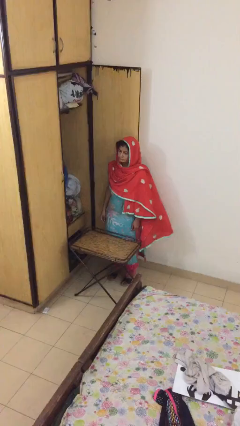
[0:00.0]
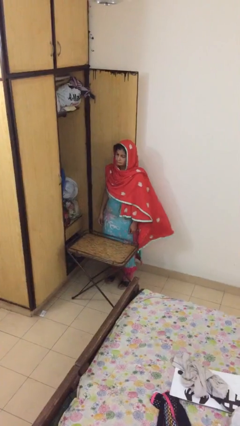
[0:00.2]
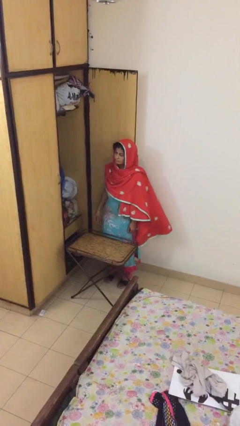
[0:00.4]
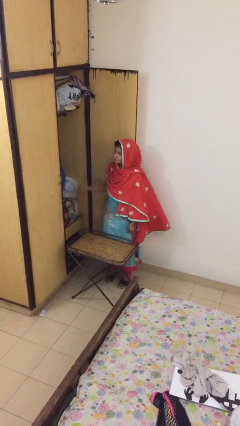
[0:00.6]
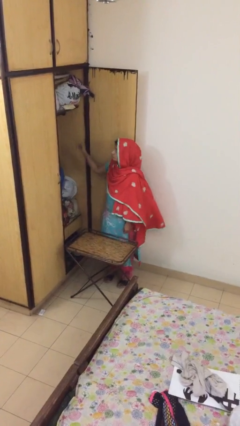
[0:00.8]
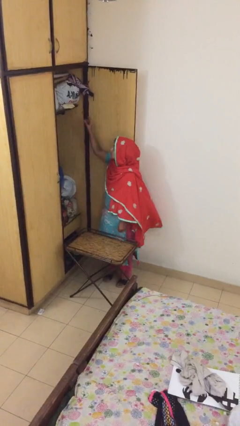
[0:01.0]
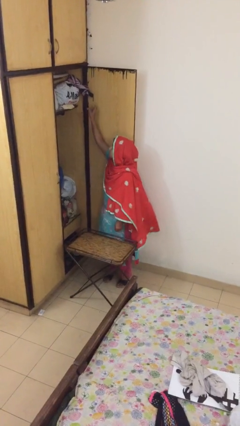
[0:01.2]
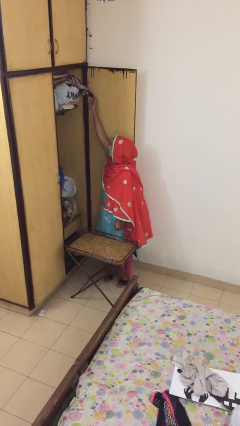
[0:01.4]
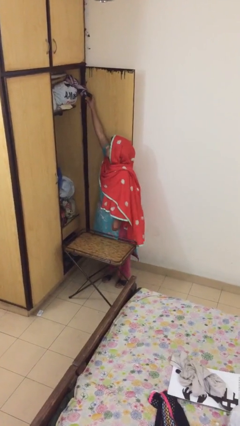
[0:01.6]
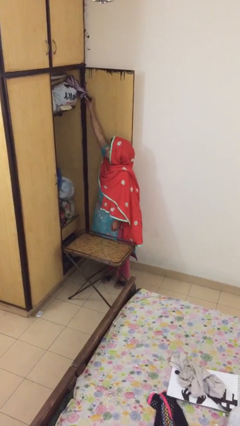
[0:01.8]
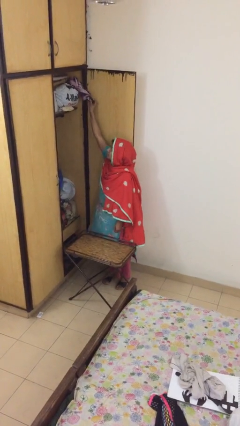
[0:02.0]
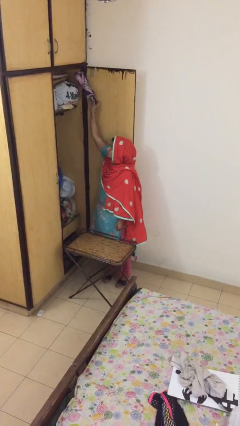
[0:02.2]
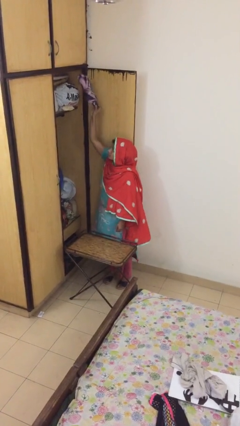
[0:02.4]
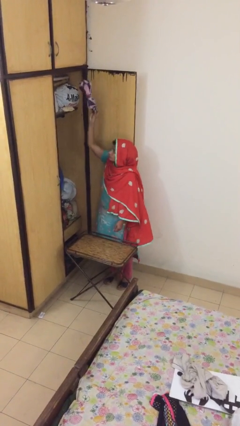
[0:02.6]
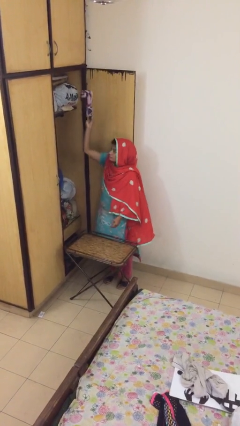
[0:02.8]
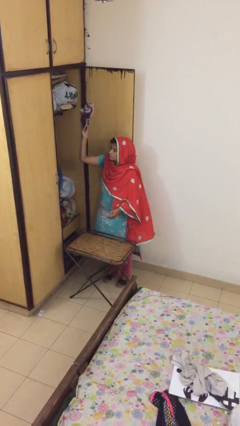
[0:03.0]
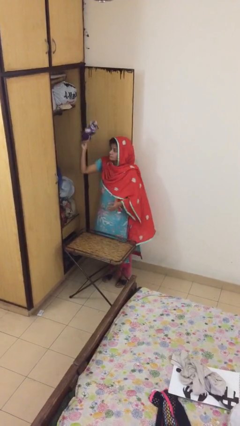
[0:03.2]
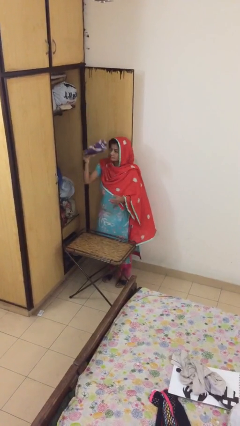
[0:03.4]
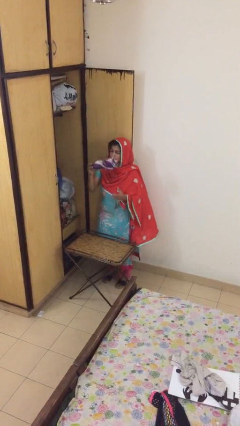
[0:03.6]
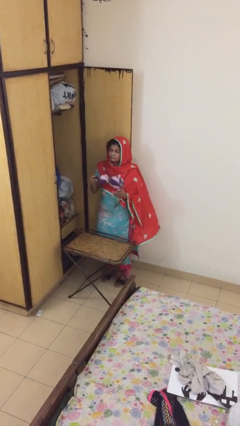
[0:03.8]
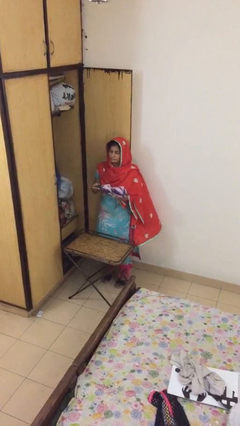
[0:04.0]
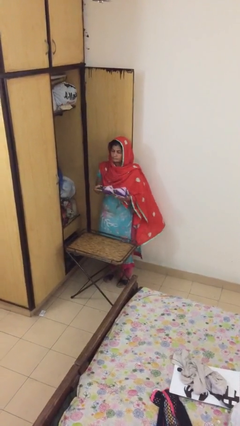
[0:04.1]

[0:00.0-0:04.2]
person picks up object from shelf

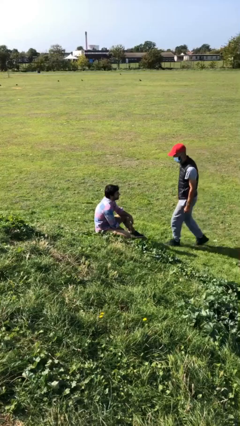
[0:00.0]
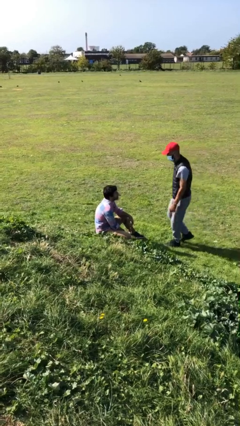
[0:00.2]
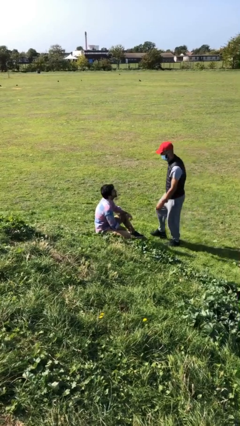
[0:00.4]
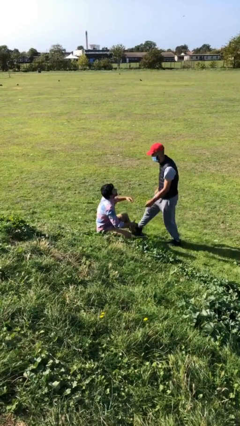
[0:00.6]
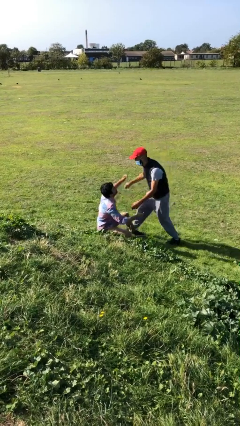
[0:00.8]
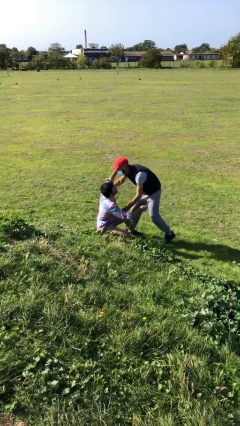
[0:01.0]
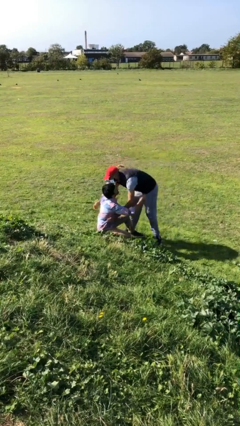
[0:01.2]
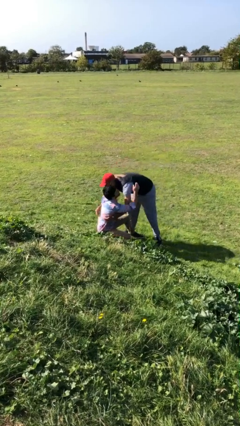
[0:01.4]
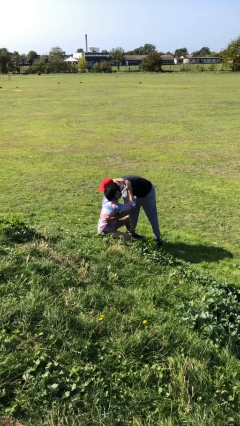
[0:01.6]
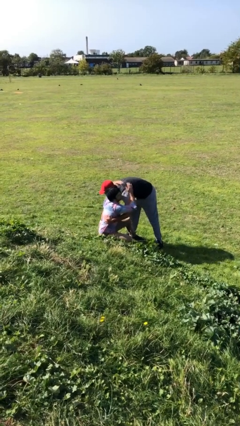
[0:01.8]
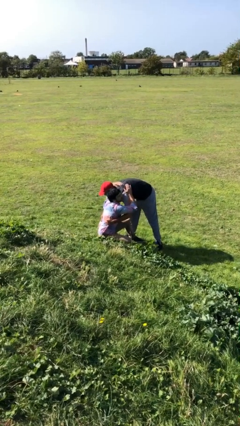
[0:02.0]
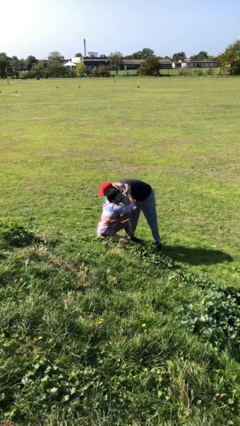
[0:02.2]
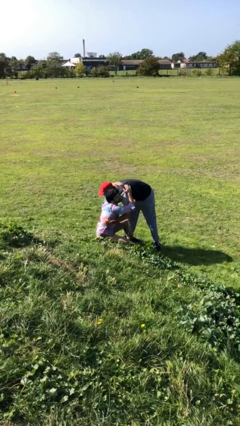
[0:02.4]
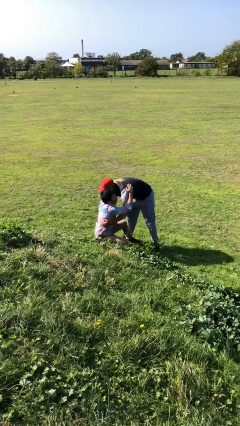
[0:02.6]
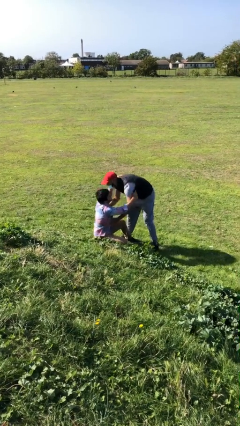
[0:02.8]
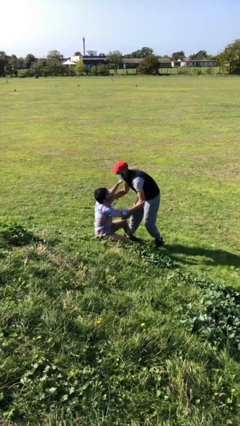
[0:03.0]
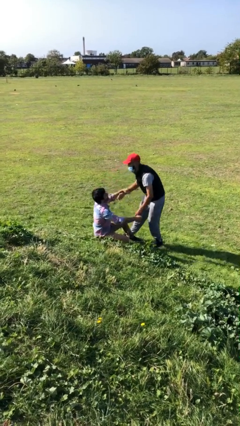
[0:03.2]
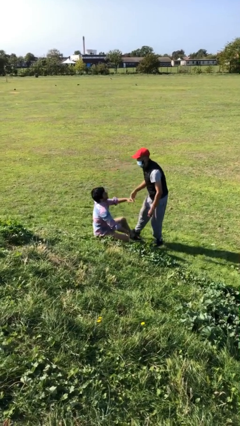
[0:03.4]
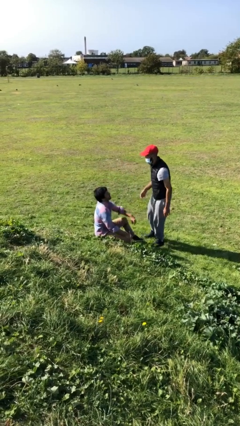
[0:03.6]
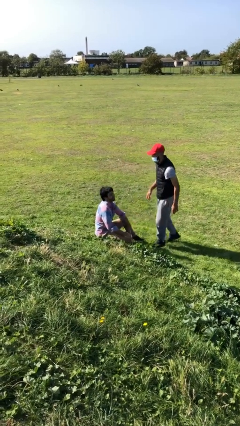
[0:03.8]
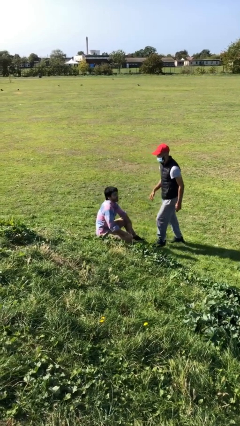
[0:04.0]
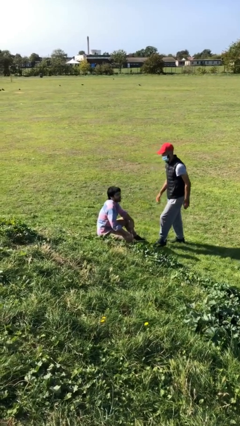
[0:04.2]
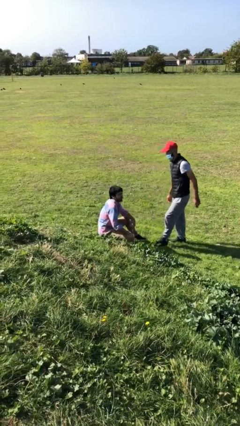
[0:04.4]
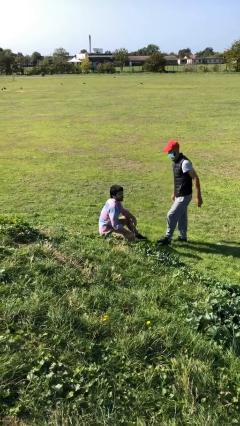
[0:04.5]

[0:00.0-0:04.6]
person embraces person

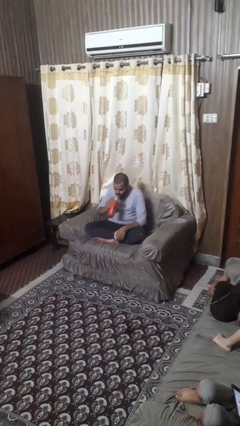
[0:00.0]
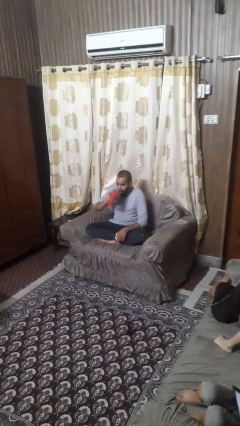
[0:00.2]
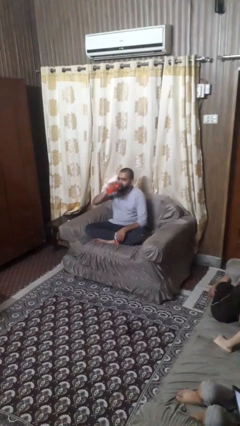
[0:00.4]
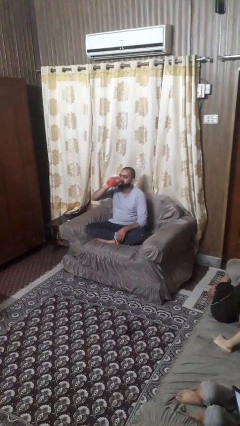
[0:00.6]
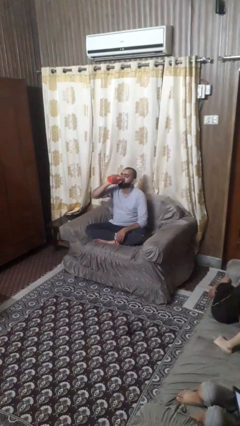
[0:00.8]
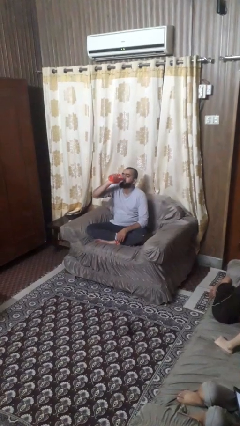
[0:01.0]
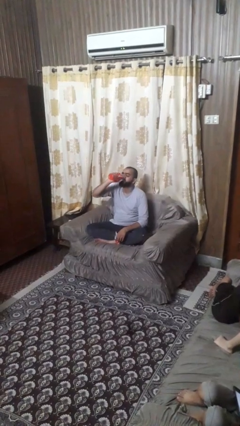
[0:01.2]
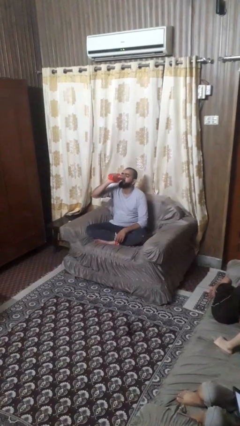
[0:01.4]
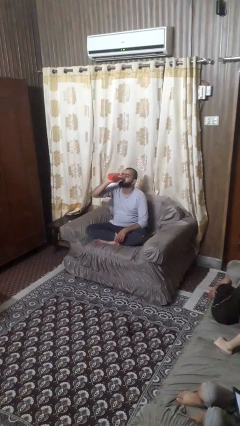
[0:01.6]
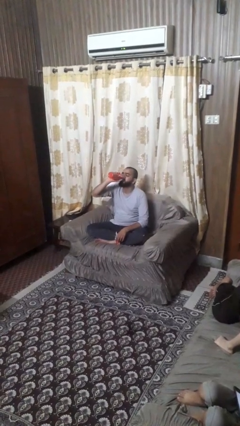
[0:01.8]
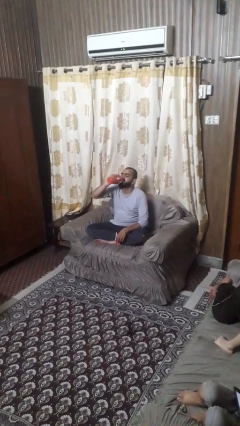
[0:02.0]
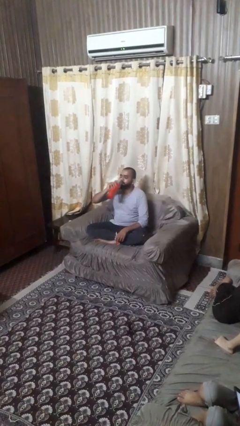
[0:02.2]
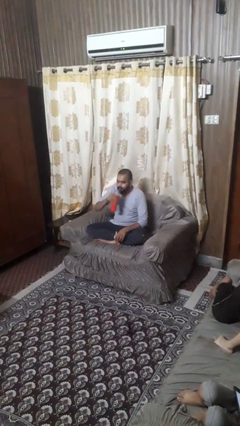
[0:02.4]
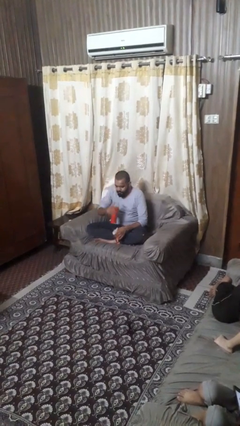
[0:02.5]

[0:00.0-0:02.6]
person drinks from bottle

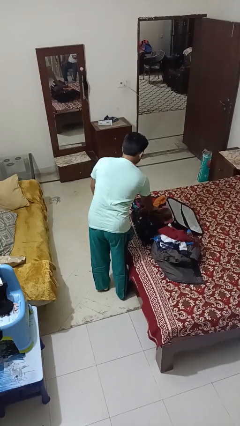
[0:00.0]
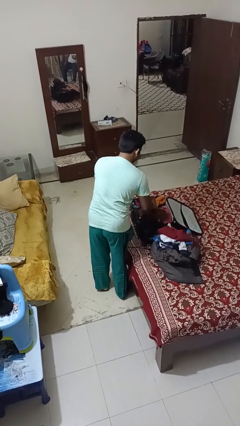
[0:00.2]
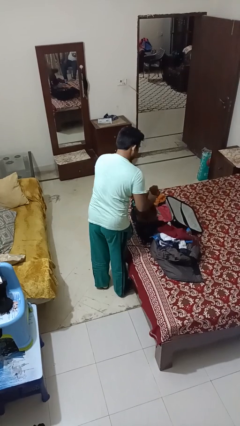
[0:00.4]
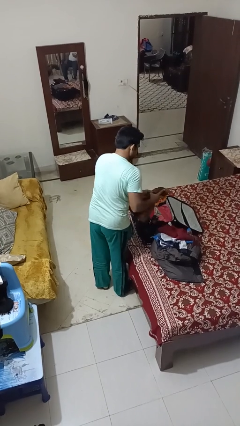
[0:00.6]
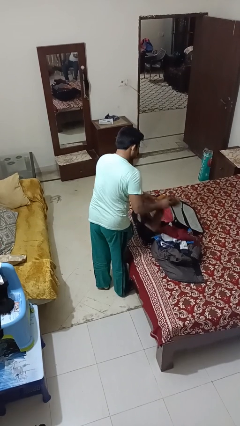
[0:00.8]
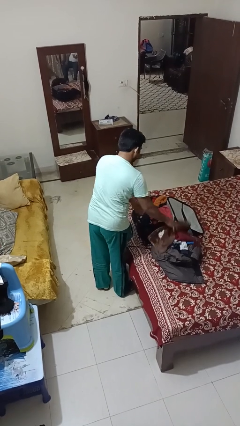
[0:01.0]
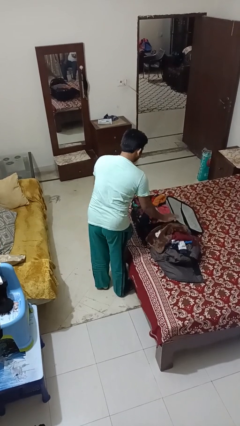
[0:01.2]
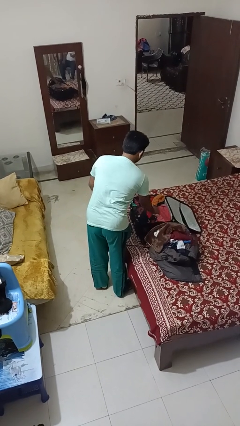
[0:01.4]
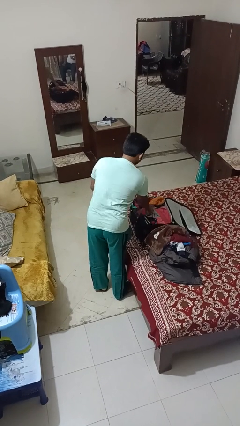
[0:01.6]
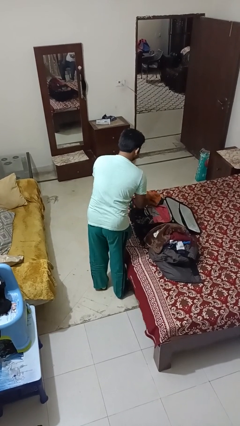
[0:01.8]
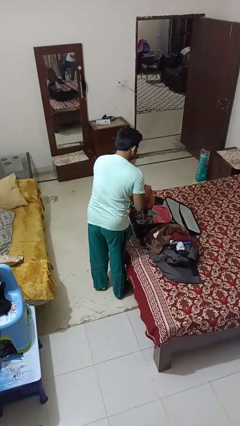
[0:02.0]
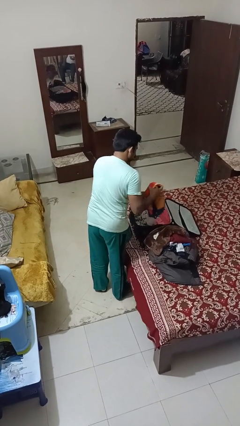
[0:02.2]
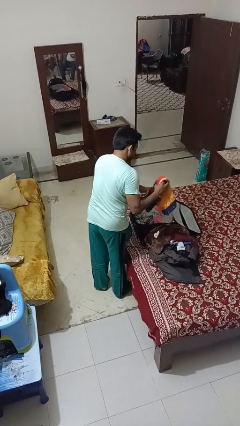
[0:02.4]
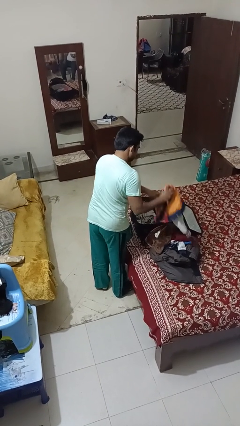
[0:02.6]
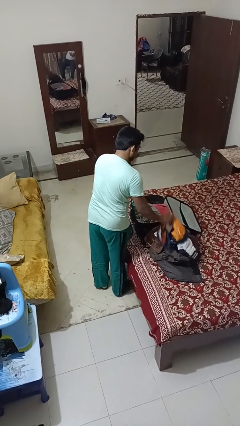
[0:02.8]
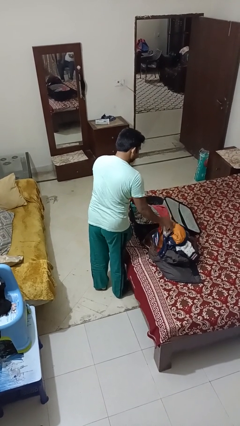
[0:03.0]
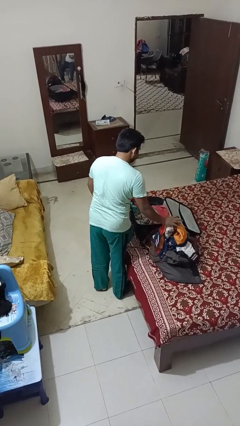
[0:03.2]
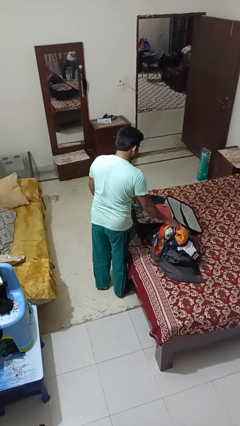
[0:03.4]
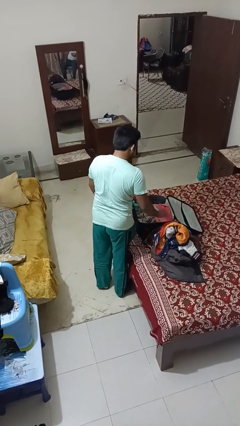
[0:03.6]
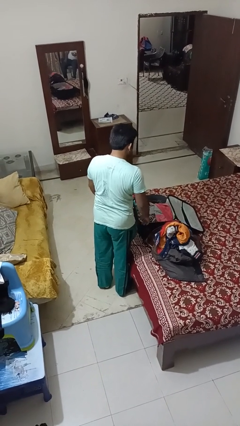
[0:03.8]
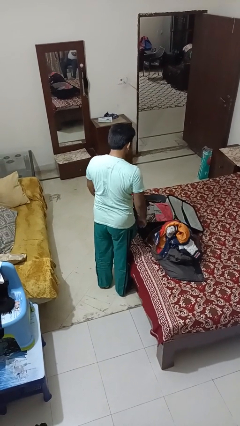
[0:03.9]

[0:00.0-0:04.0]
person unloads clothes from suitcase

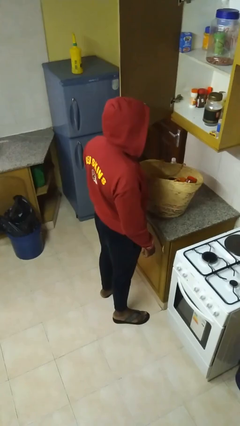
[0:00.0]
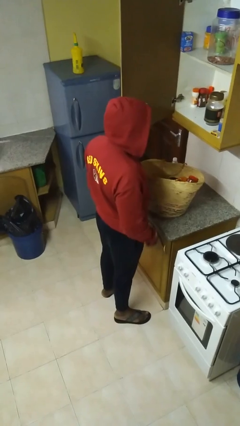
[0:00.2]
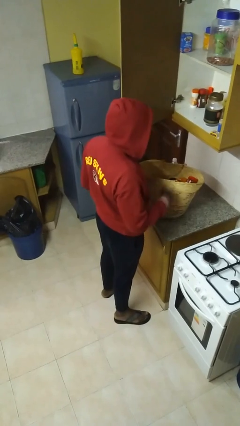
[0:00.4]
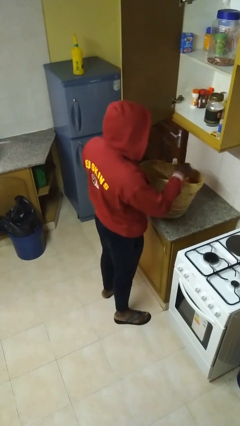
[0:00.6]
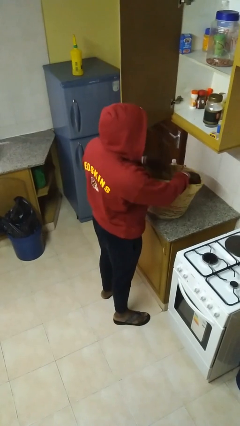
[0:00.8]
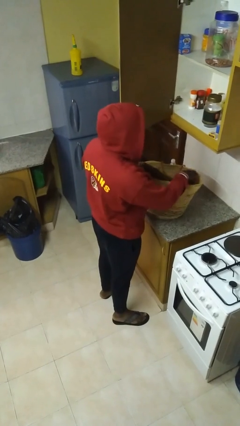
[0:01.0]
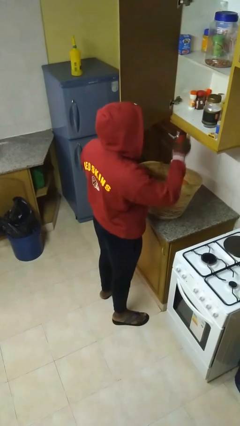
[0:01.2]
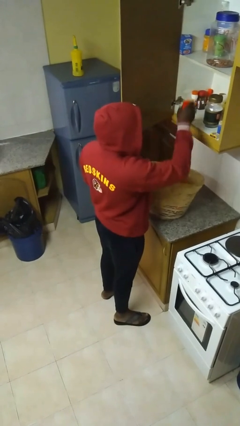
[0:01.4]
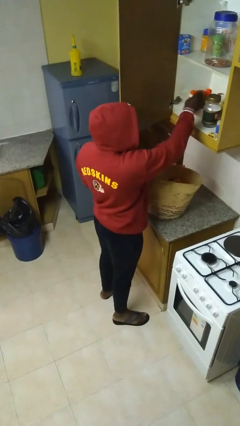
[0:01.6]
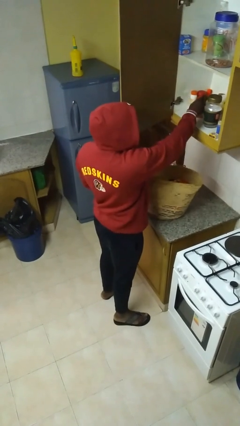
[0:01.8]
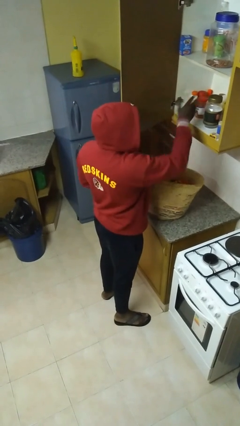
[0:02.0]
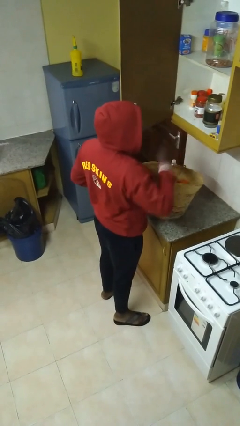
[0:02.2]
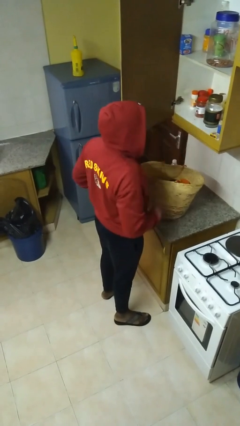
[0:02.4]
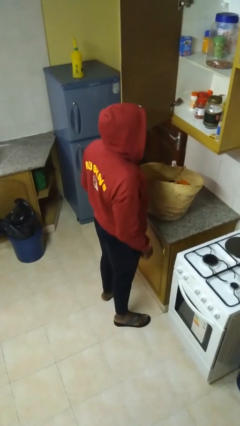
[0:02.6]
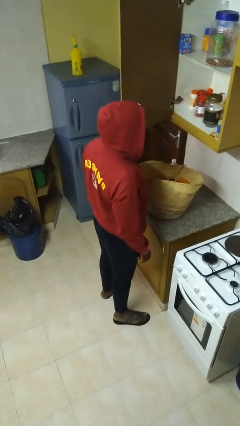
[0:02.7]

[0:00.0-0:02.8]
person loads groceries into cabinet
